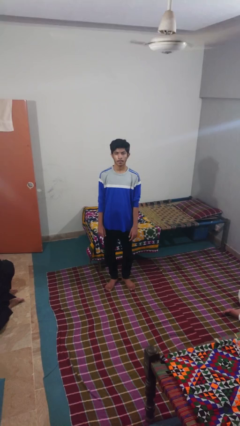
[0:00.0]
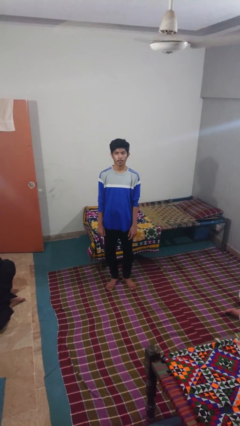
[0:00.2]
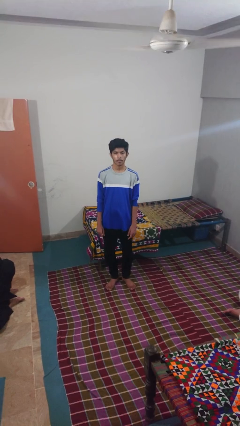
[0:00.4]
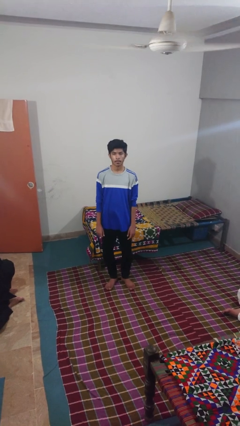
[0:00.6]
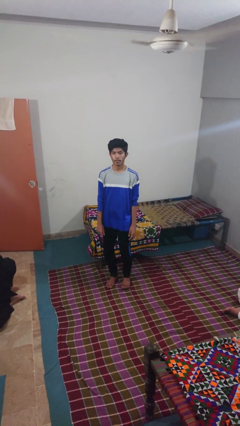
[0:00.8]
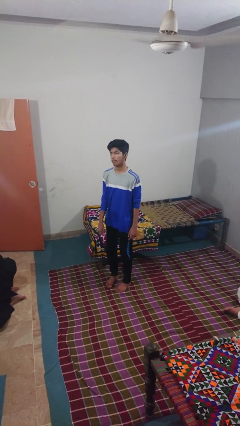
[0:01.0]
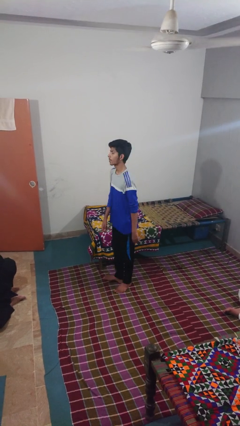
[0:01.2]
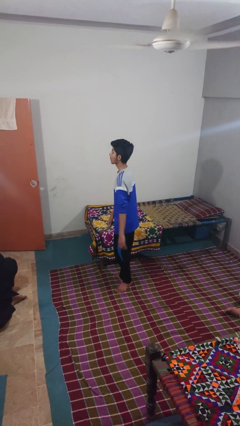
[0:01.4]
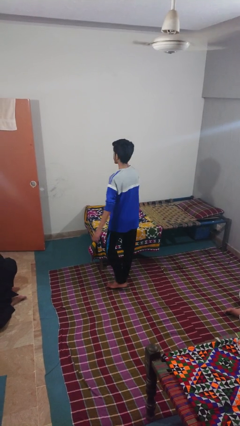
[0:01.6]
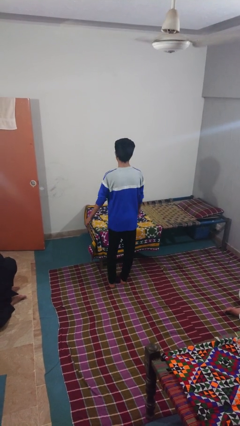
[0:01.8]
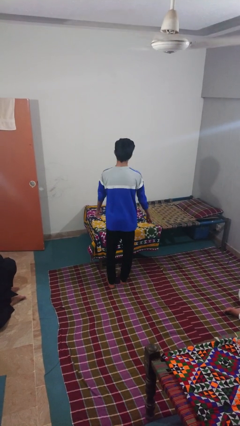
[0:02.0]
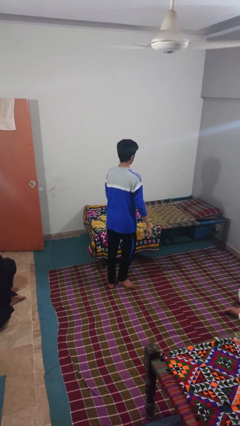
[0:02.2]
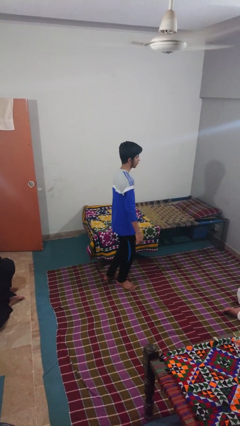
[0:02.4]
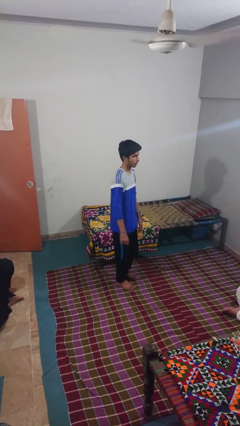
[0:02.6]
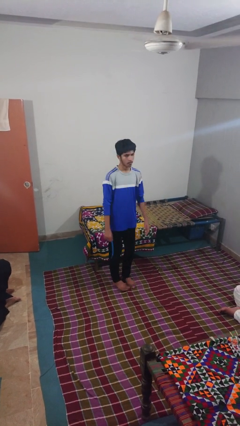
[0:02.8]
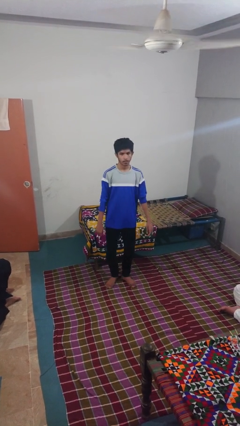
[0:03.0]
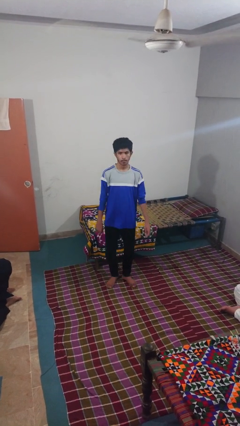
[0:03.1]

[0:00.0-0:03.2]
person twirls

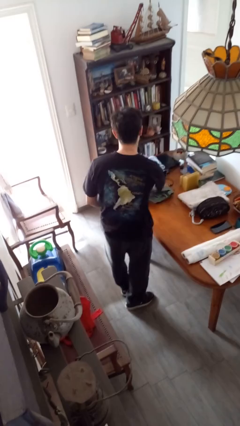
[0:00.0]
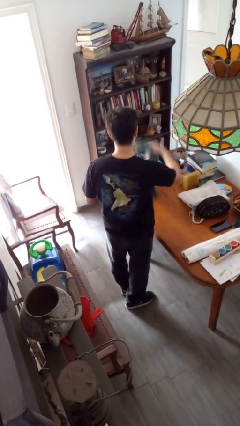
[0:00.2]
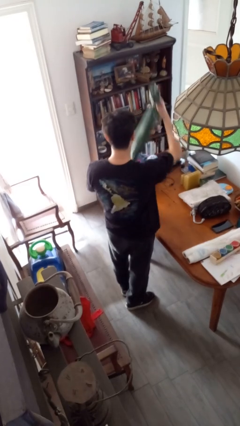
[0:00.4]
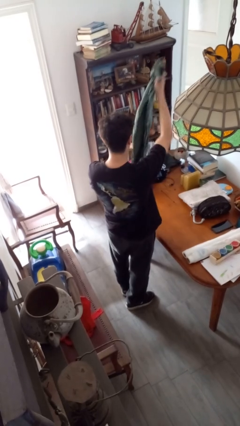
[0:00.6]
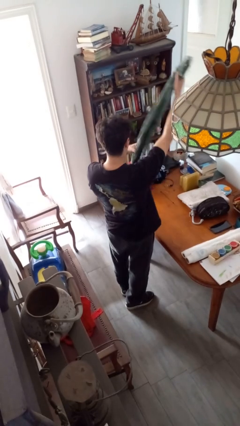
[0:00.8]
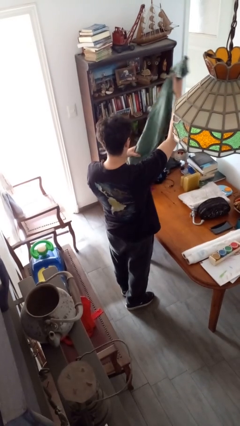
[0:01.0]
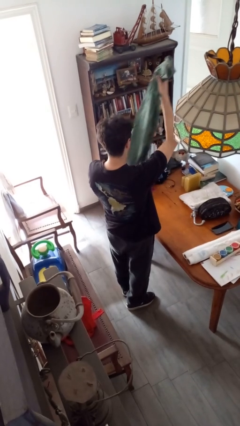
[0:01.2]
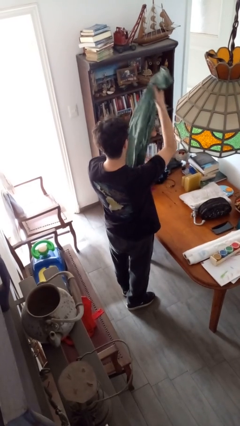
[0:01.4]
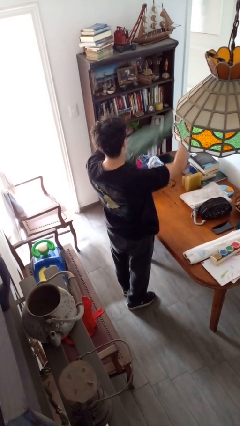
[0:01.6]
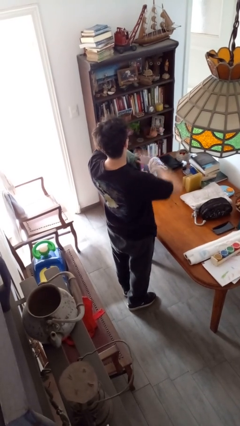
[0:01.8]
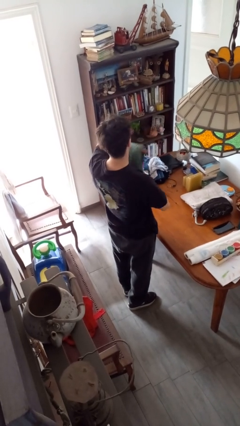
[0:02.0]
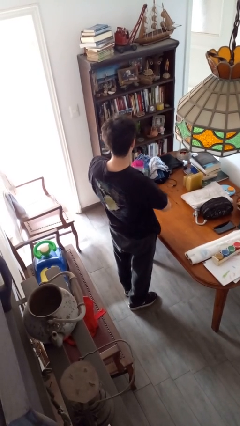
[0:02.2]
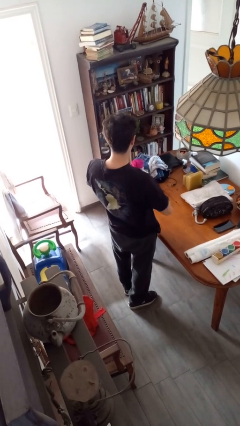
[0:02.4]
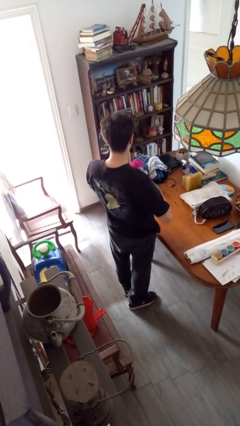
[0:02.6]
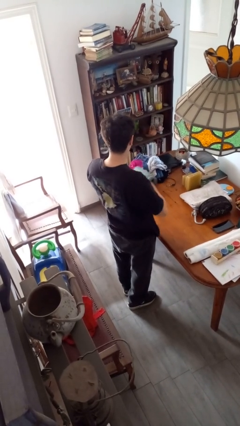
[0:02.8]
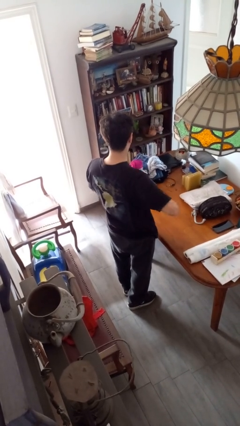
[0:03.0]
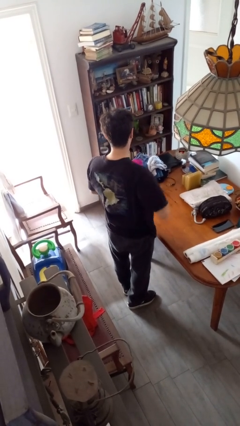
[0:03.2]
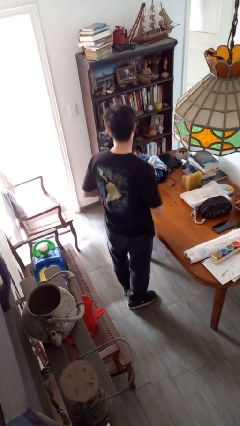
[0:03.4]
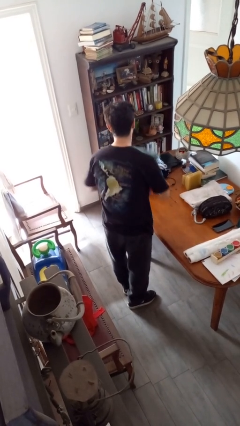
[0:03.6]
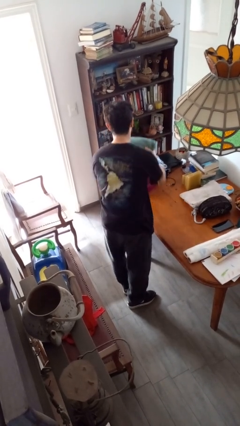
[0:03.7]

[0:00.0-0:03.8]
person folds shirt

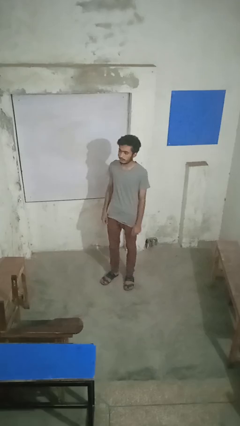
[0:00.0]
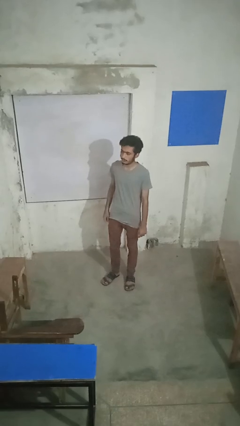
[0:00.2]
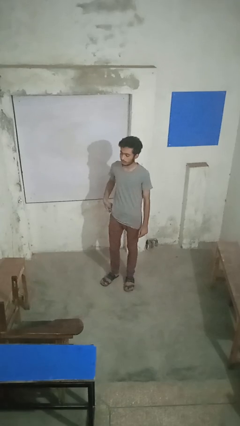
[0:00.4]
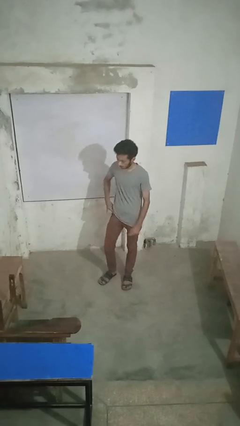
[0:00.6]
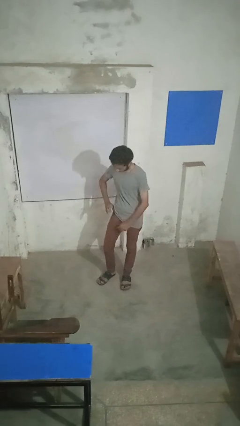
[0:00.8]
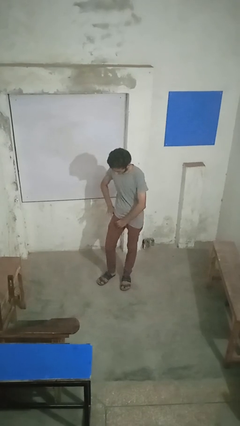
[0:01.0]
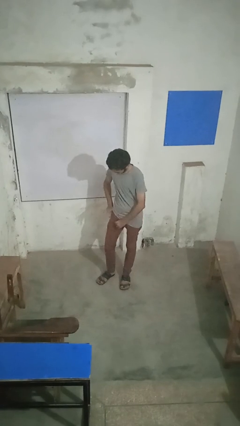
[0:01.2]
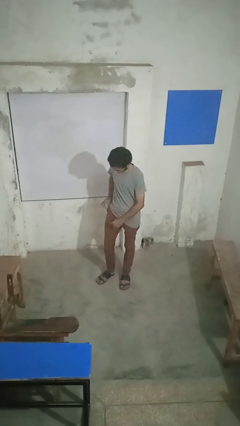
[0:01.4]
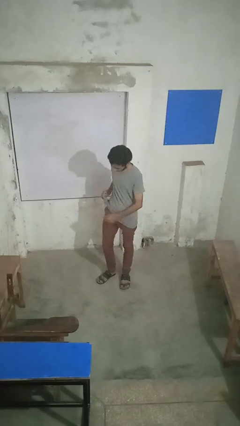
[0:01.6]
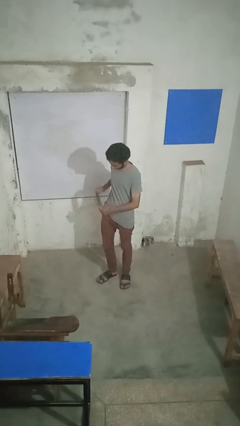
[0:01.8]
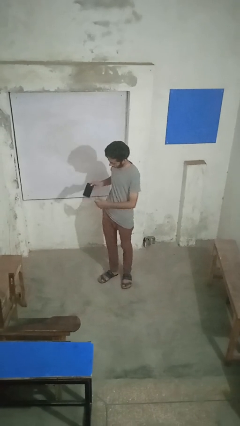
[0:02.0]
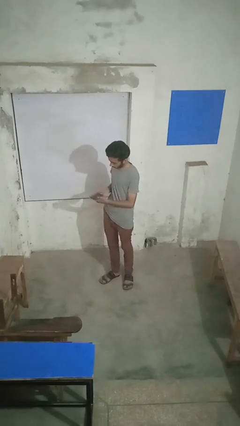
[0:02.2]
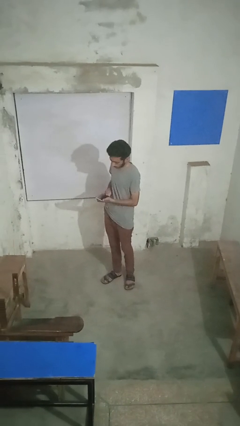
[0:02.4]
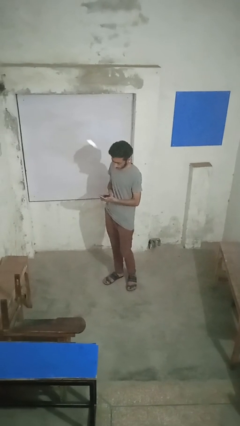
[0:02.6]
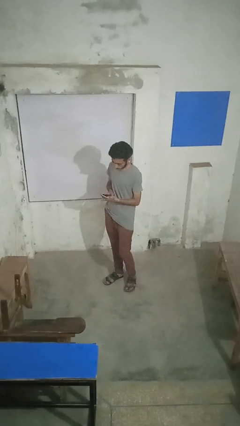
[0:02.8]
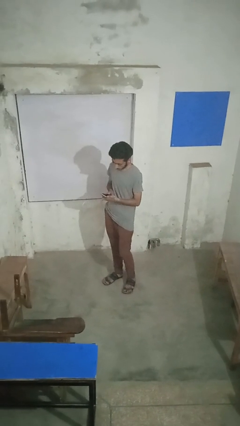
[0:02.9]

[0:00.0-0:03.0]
person takes phone from pocket

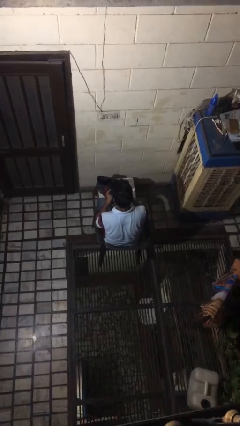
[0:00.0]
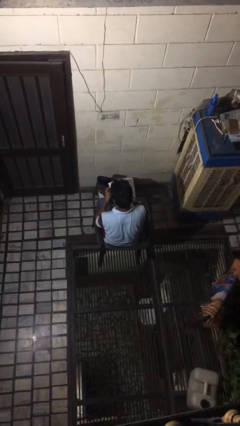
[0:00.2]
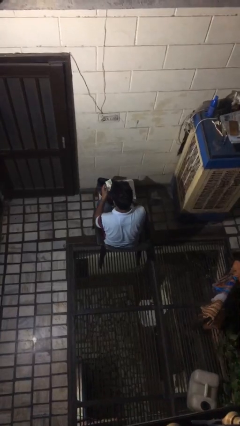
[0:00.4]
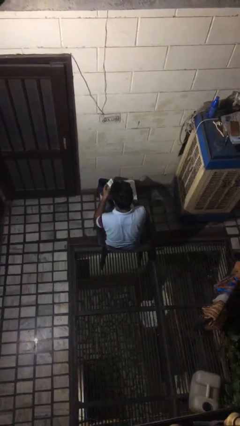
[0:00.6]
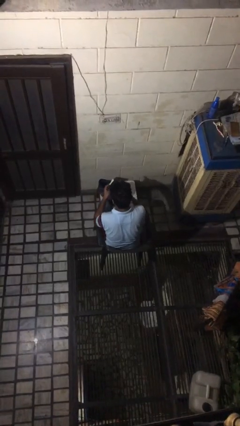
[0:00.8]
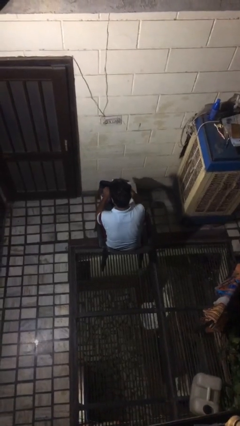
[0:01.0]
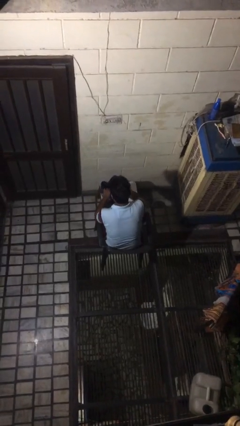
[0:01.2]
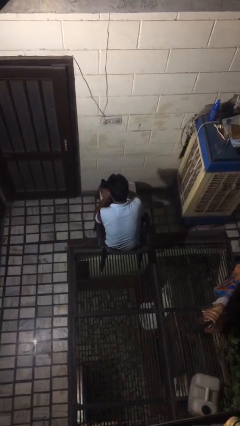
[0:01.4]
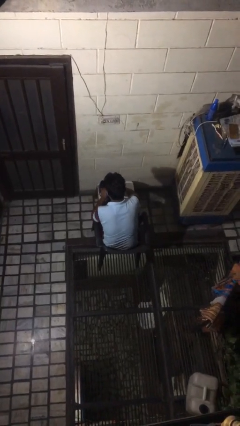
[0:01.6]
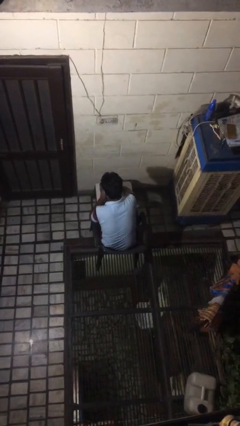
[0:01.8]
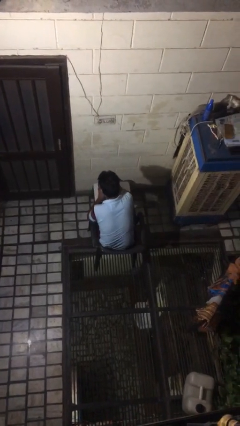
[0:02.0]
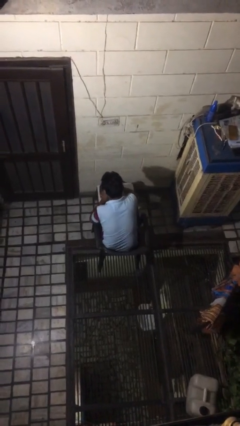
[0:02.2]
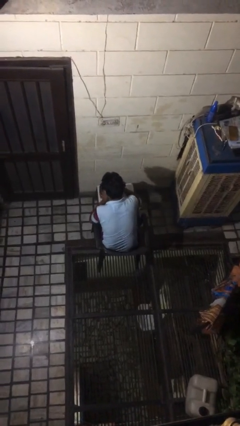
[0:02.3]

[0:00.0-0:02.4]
person puts object into bag

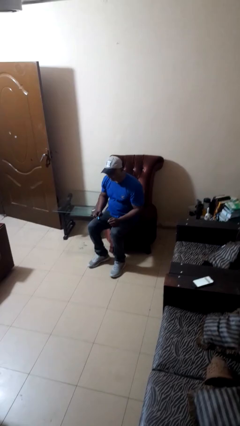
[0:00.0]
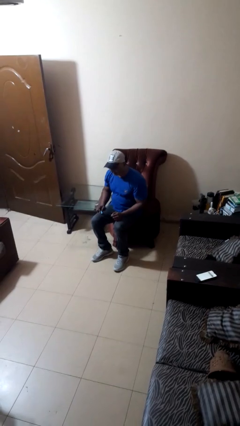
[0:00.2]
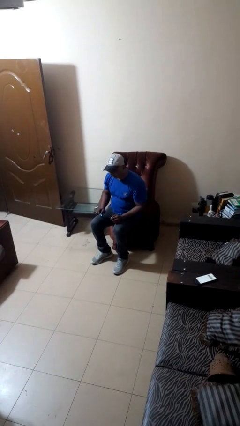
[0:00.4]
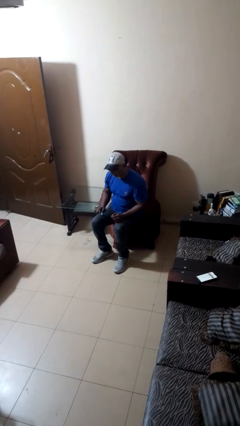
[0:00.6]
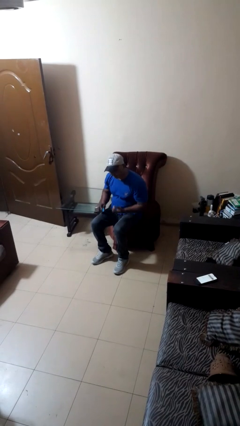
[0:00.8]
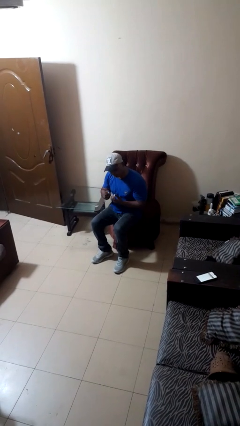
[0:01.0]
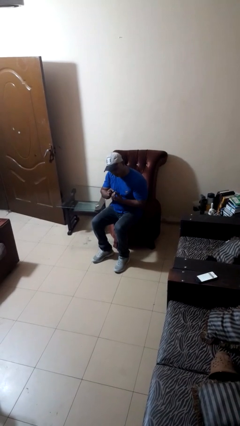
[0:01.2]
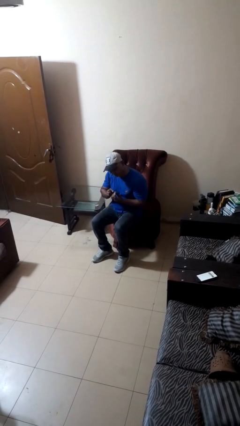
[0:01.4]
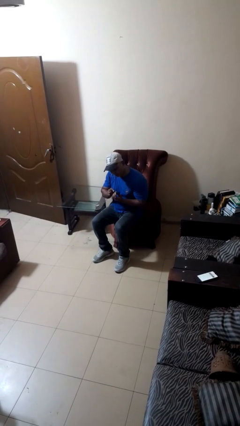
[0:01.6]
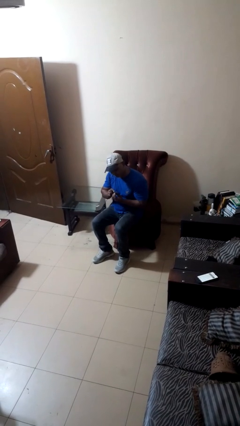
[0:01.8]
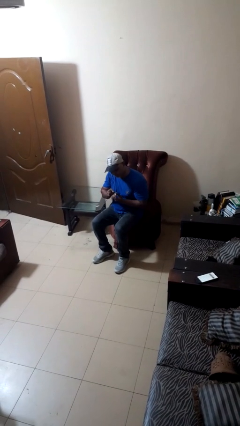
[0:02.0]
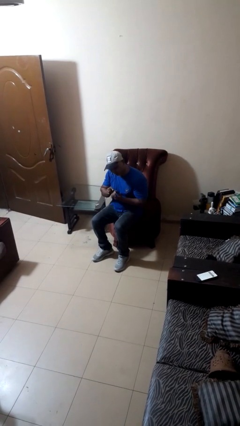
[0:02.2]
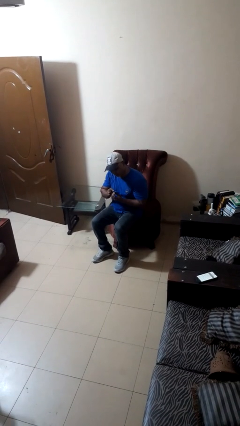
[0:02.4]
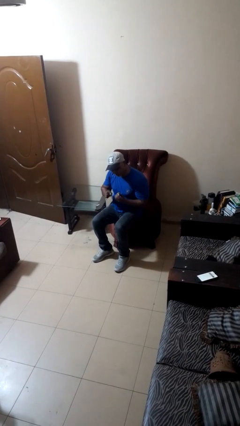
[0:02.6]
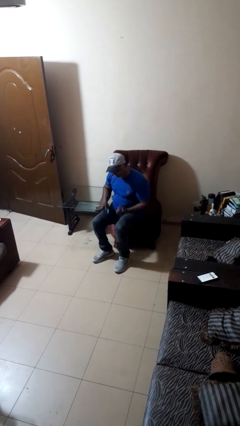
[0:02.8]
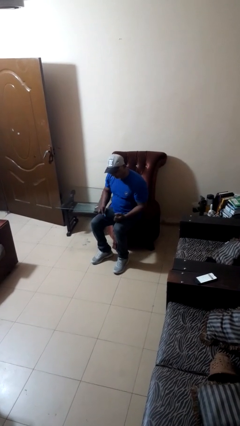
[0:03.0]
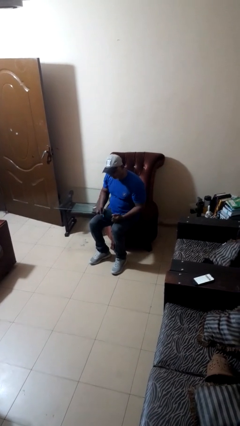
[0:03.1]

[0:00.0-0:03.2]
person files fingernails

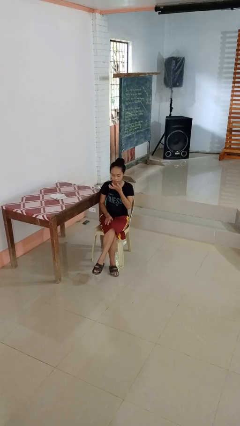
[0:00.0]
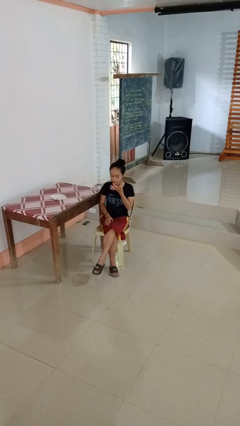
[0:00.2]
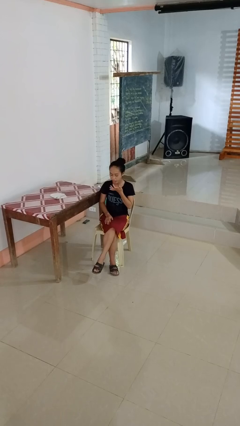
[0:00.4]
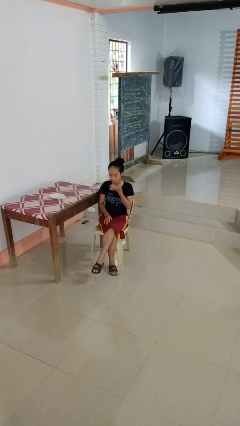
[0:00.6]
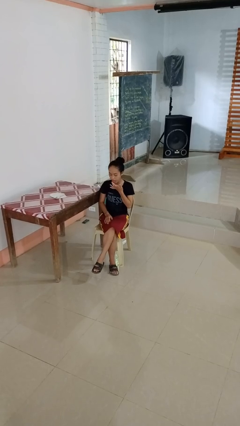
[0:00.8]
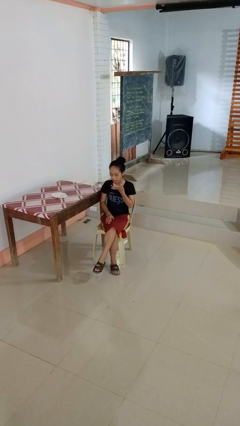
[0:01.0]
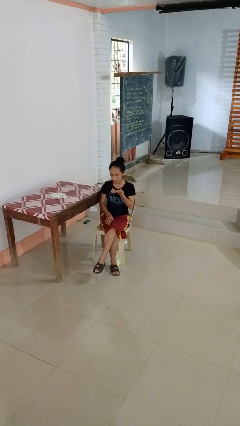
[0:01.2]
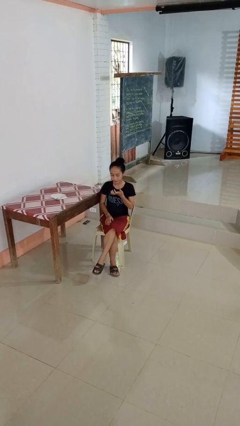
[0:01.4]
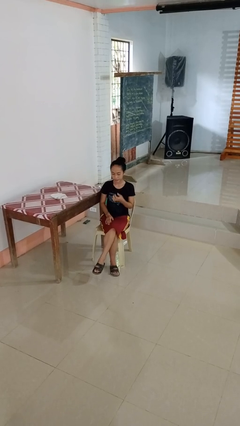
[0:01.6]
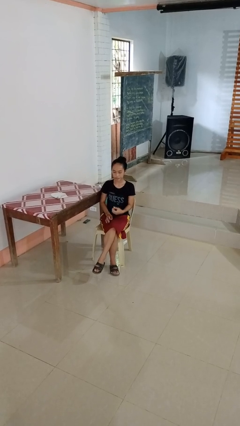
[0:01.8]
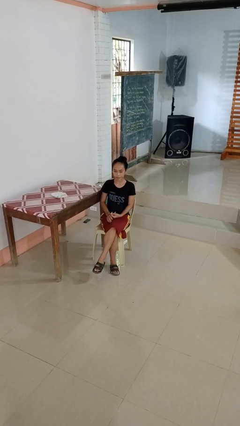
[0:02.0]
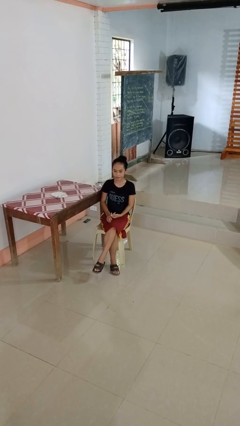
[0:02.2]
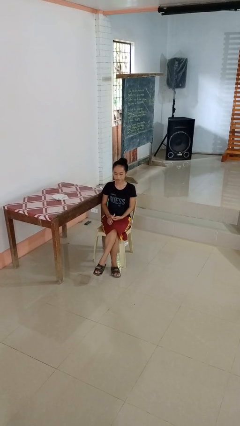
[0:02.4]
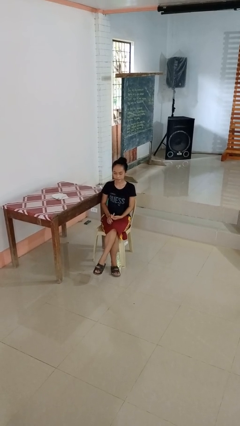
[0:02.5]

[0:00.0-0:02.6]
person licks fingers
